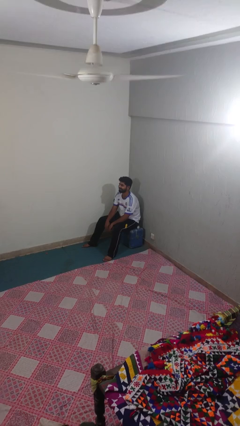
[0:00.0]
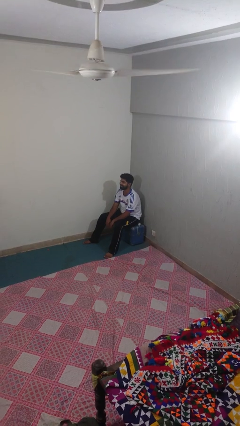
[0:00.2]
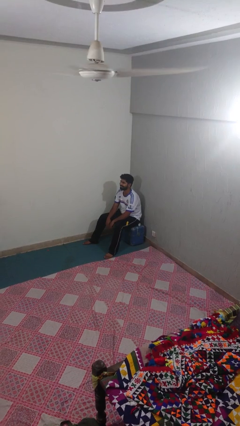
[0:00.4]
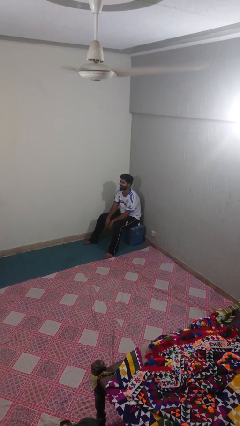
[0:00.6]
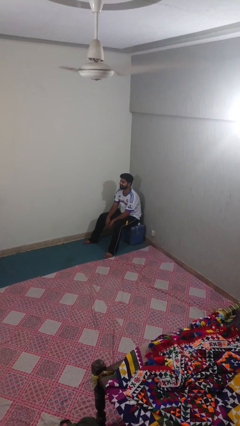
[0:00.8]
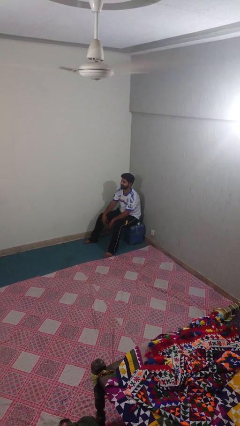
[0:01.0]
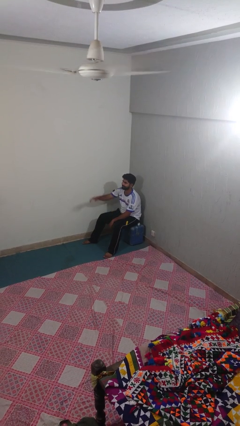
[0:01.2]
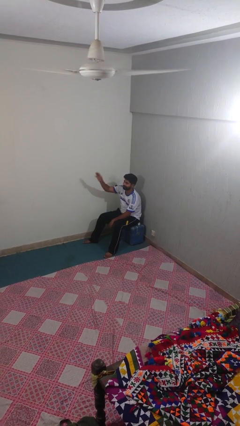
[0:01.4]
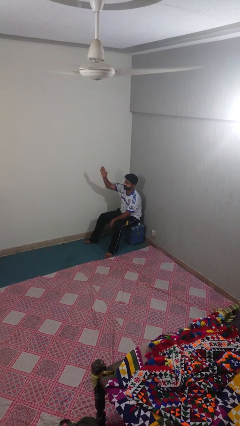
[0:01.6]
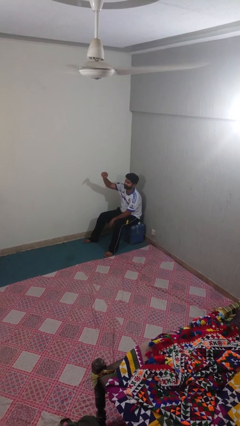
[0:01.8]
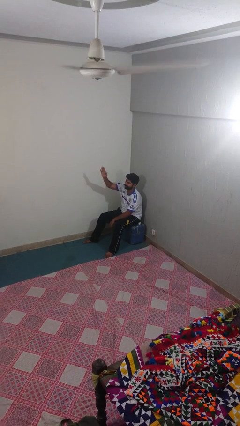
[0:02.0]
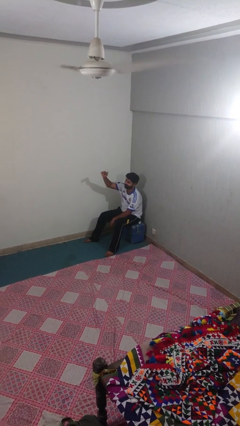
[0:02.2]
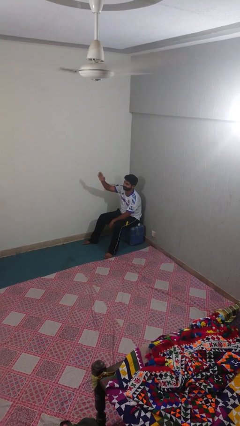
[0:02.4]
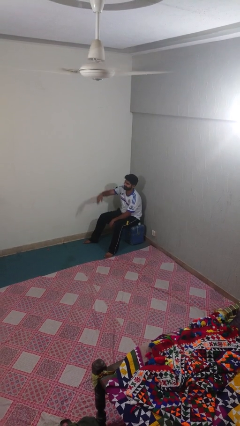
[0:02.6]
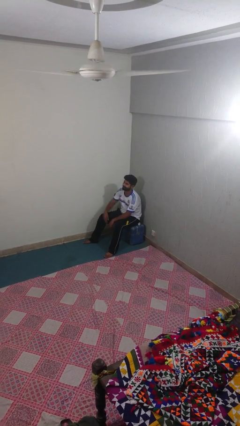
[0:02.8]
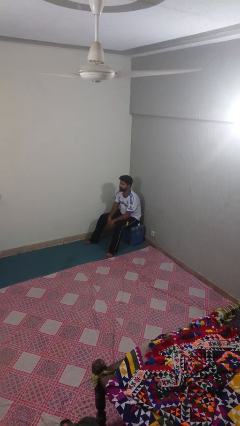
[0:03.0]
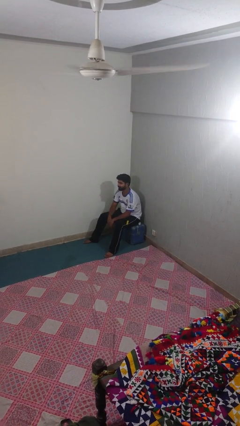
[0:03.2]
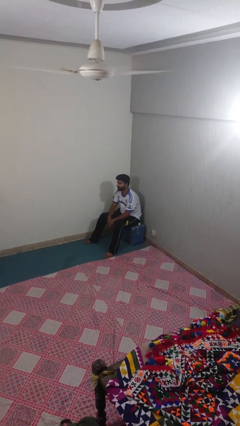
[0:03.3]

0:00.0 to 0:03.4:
person gestures come here

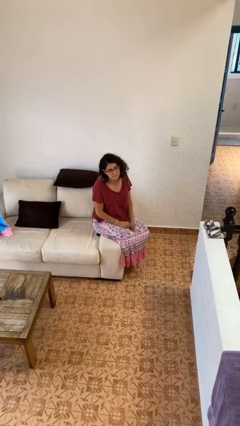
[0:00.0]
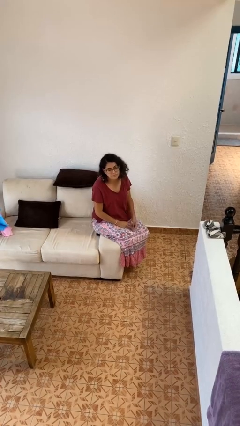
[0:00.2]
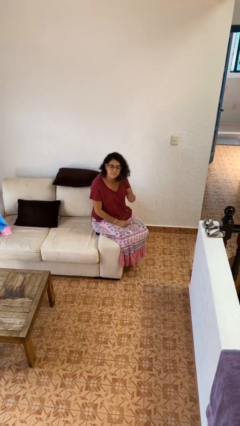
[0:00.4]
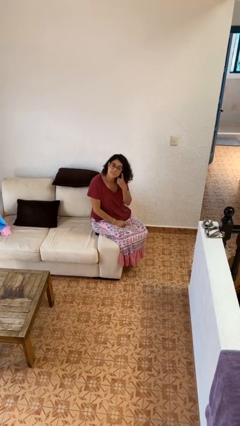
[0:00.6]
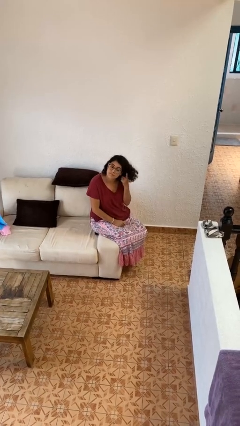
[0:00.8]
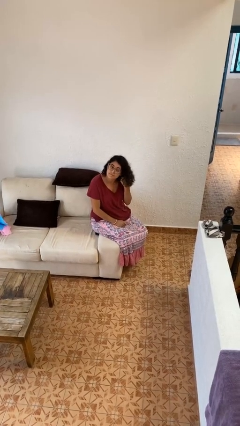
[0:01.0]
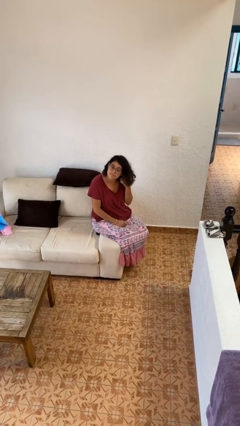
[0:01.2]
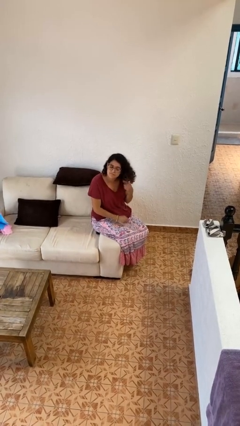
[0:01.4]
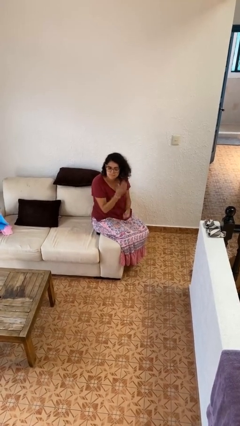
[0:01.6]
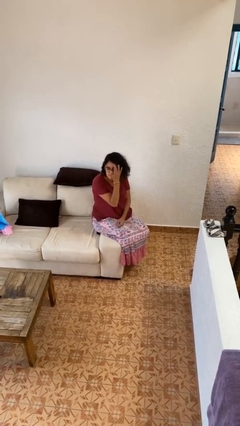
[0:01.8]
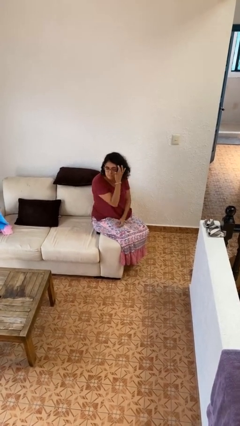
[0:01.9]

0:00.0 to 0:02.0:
person gestures listen closely

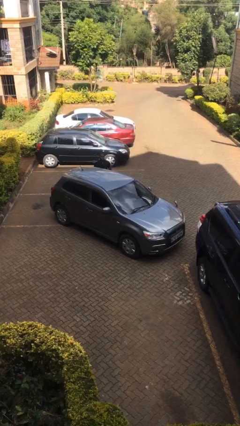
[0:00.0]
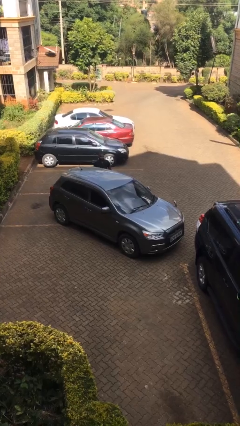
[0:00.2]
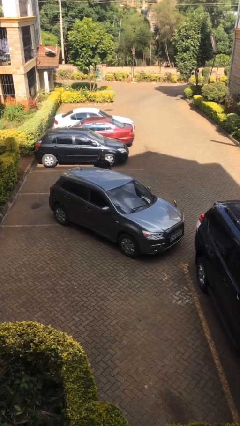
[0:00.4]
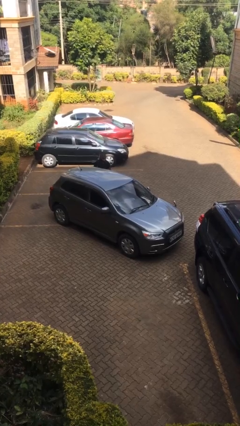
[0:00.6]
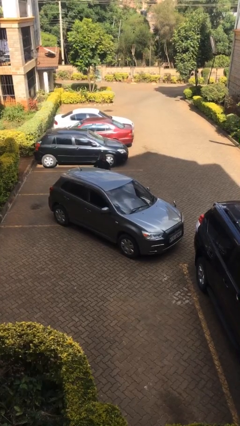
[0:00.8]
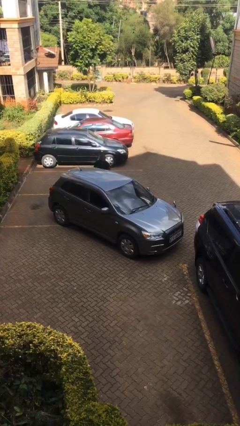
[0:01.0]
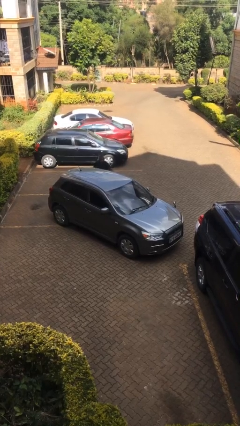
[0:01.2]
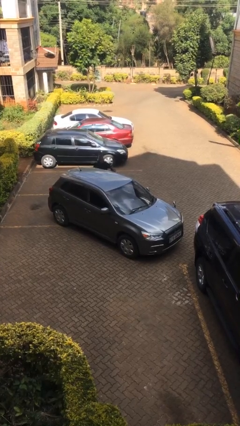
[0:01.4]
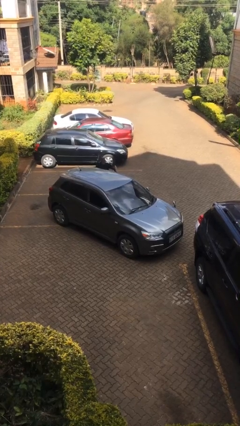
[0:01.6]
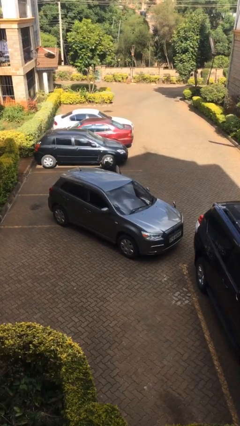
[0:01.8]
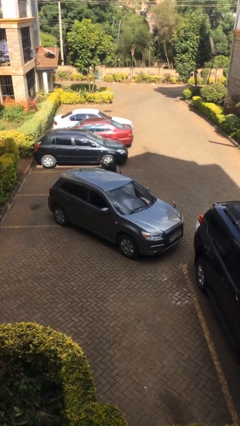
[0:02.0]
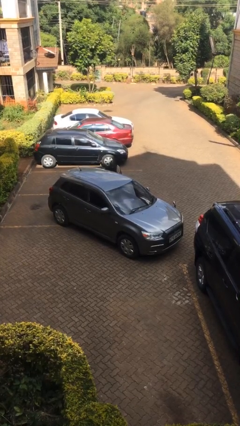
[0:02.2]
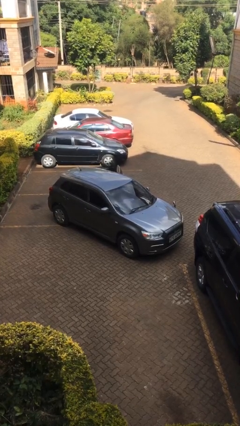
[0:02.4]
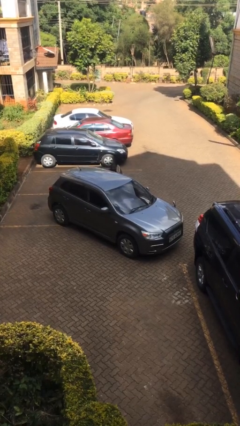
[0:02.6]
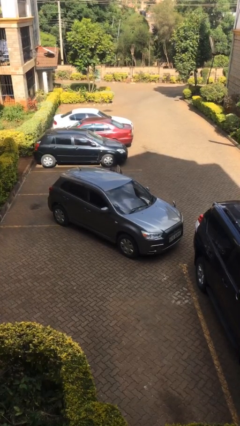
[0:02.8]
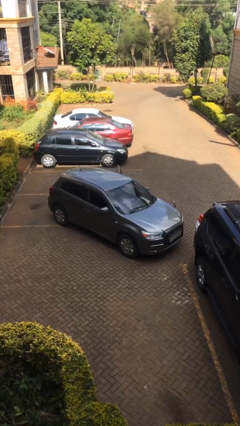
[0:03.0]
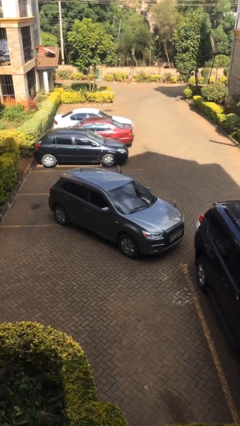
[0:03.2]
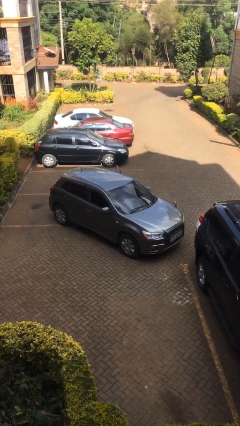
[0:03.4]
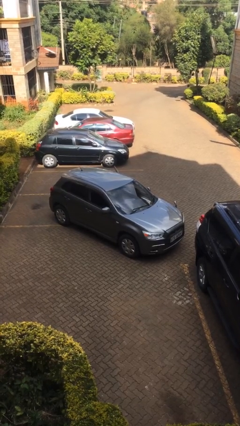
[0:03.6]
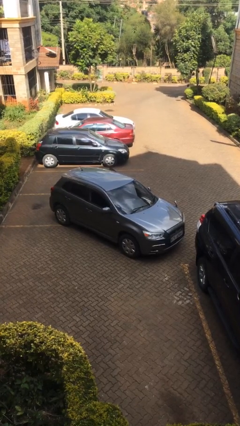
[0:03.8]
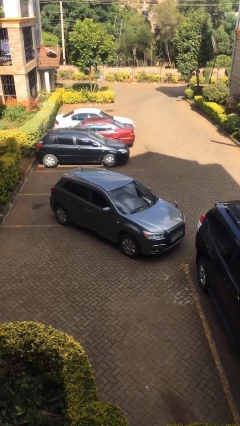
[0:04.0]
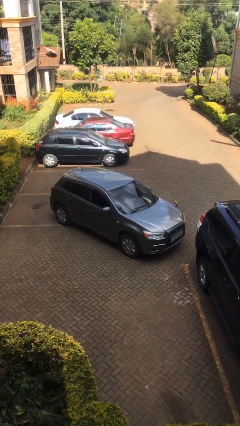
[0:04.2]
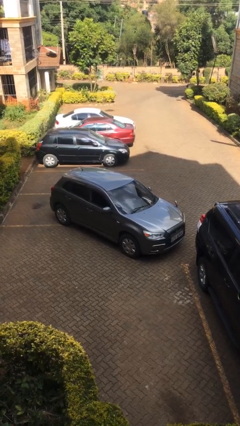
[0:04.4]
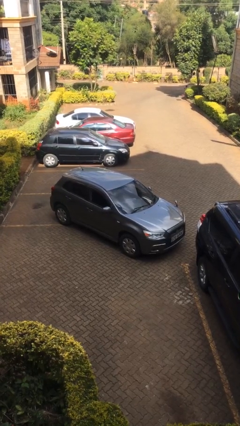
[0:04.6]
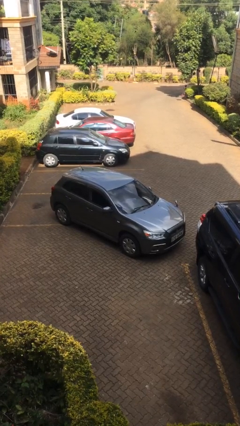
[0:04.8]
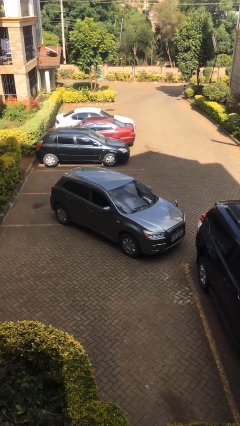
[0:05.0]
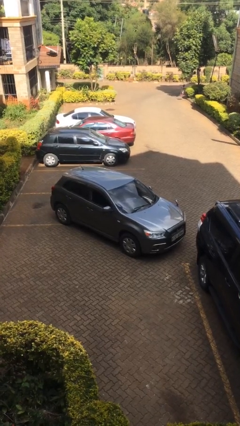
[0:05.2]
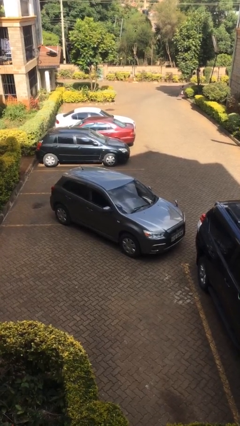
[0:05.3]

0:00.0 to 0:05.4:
car picks up person

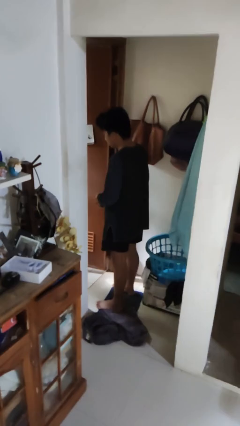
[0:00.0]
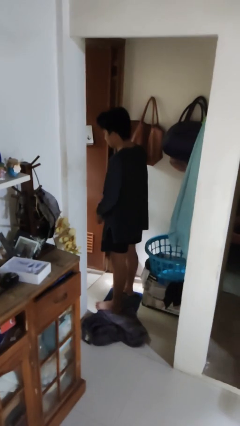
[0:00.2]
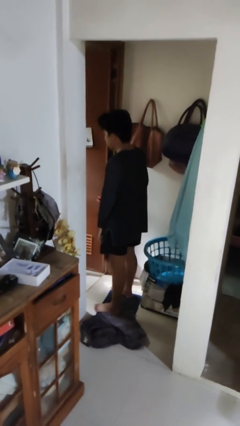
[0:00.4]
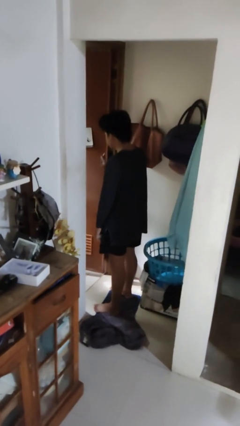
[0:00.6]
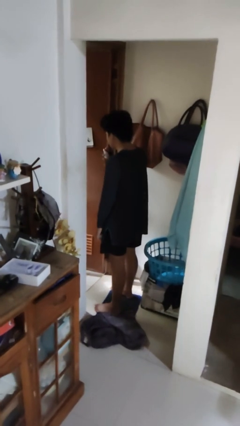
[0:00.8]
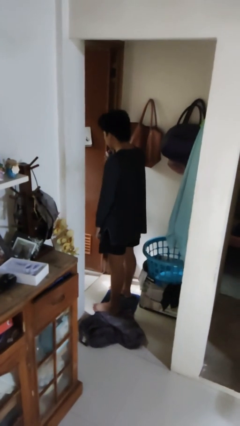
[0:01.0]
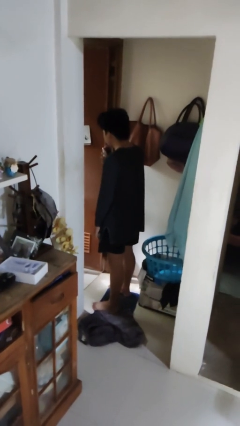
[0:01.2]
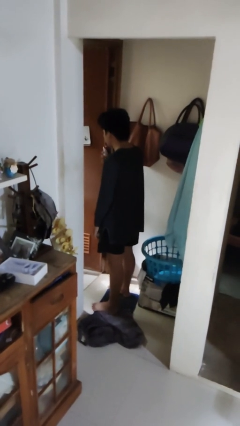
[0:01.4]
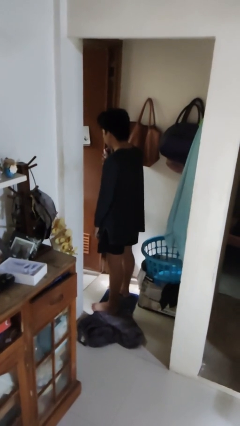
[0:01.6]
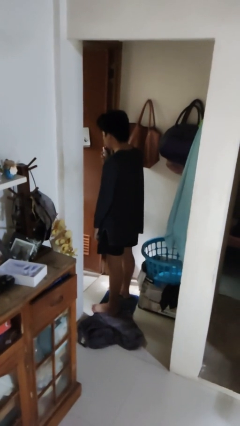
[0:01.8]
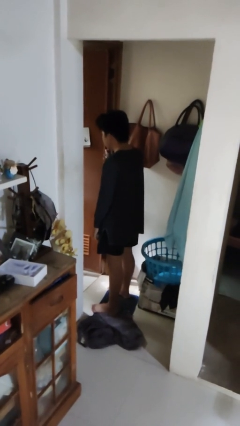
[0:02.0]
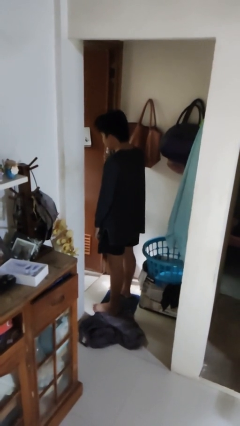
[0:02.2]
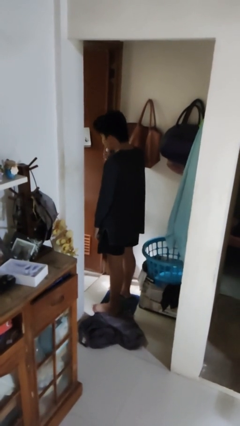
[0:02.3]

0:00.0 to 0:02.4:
person shaves face

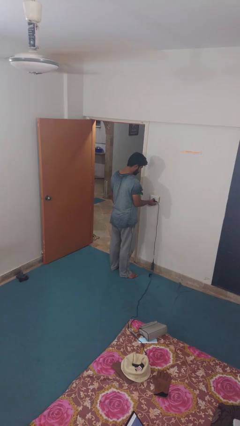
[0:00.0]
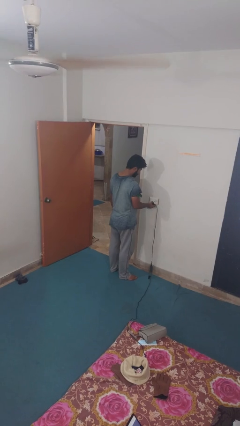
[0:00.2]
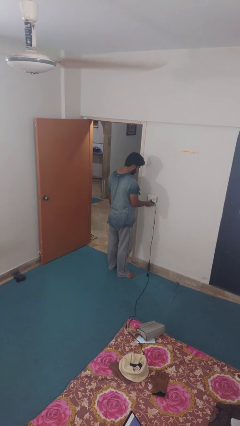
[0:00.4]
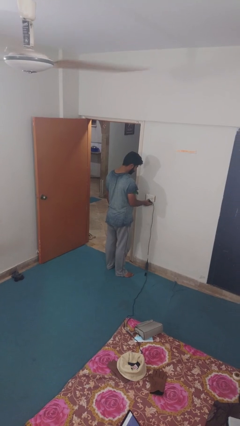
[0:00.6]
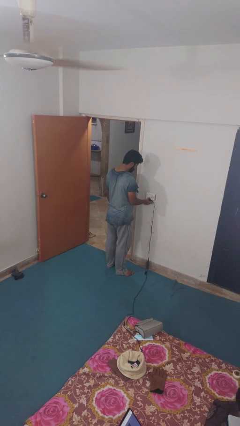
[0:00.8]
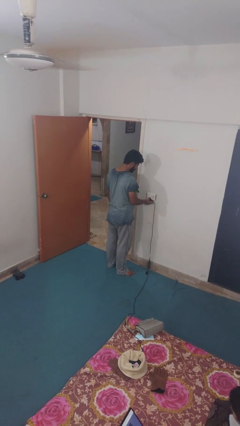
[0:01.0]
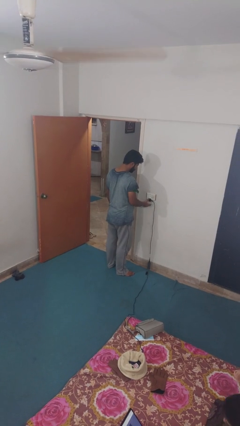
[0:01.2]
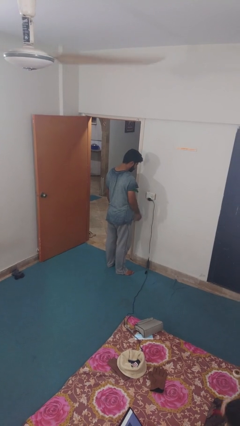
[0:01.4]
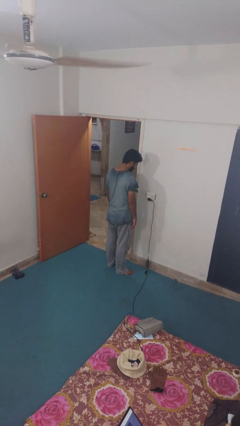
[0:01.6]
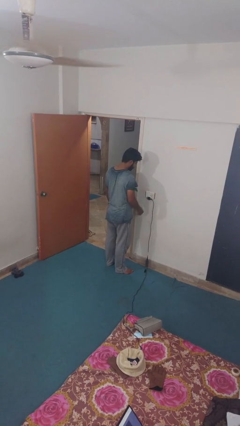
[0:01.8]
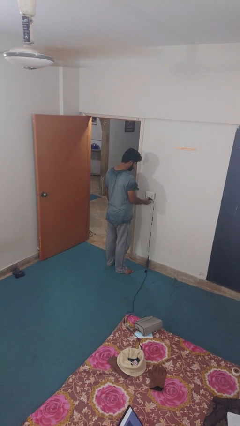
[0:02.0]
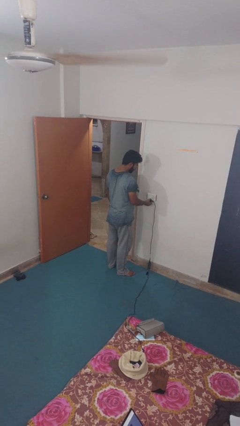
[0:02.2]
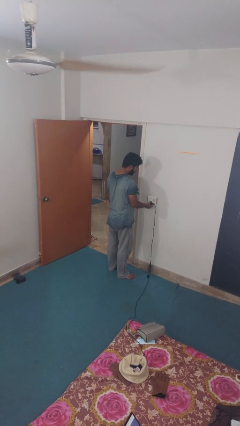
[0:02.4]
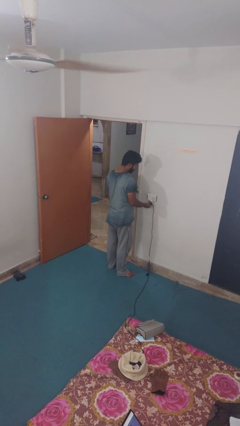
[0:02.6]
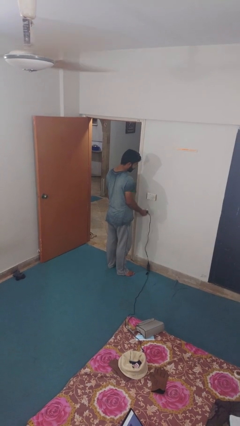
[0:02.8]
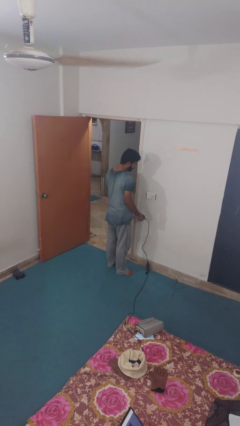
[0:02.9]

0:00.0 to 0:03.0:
person unplugs from electrical socket

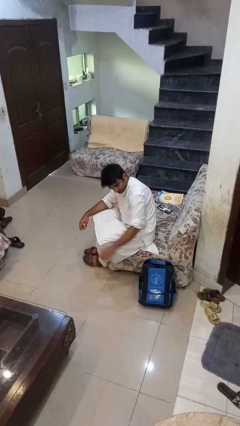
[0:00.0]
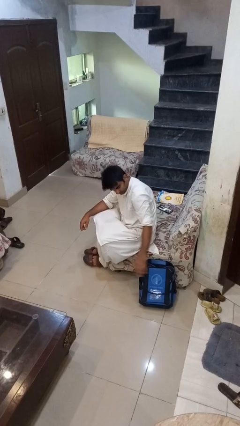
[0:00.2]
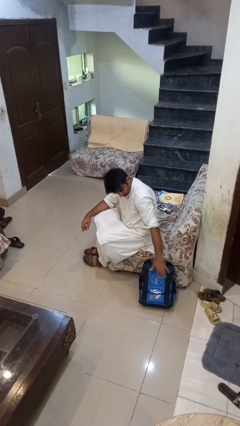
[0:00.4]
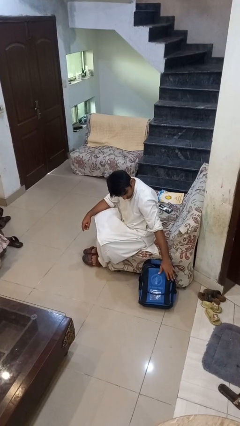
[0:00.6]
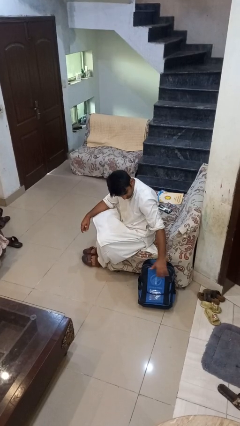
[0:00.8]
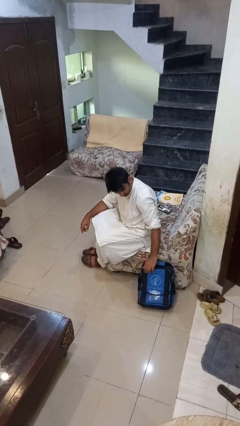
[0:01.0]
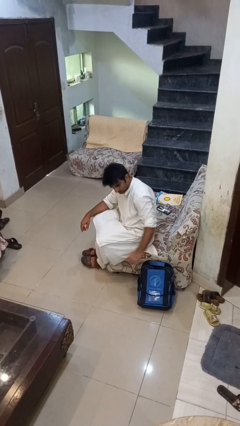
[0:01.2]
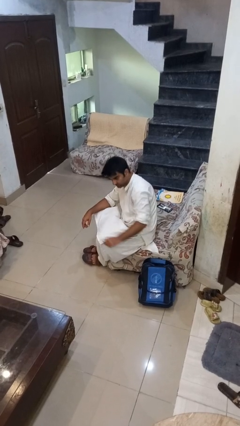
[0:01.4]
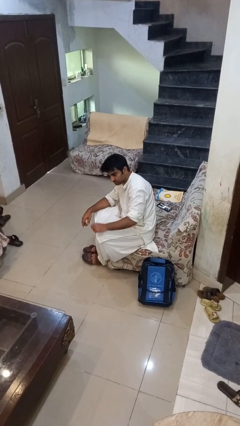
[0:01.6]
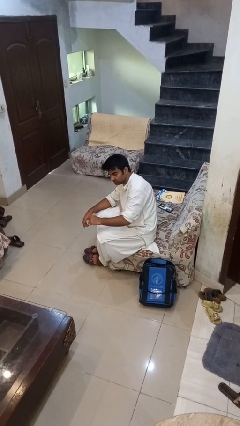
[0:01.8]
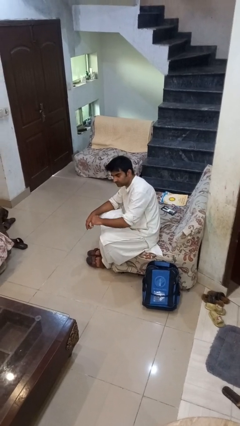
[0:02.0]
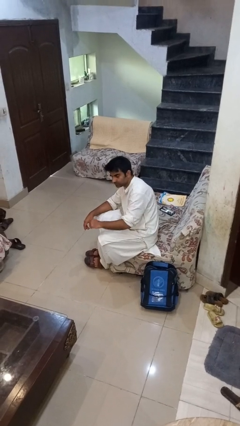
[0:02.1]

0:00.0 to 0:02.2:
person waves hand over object
